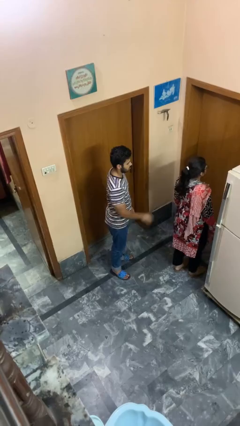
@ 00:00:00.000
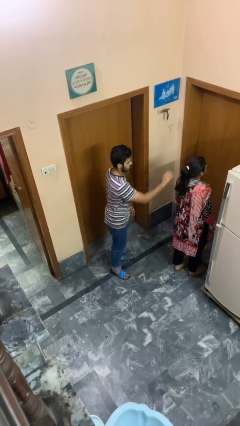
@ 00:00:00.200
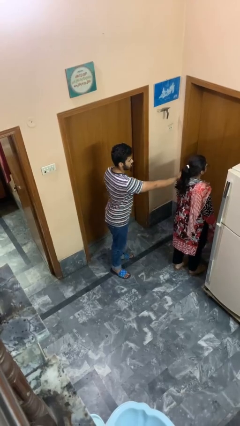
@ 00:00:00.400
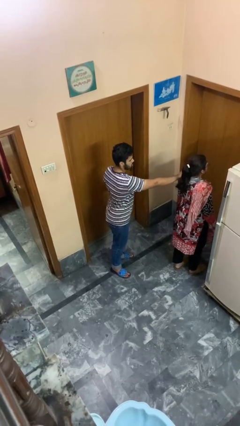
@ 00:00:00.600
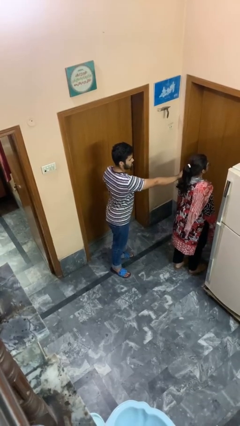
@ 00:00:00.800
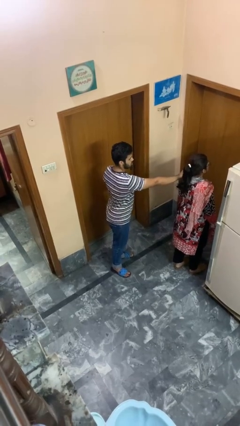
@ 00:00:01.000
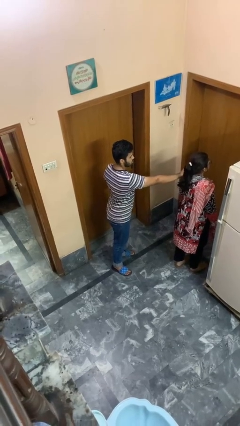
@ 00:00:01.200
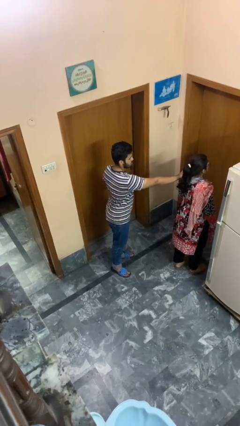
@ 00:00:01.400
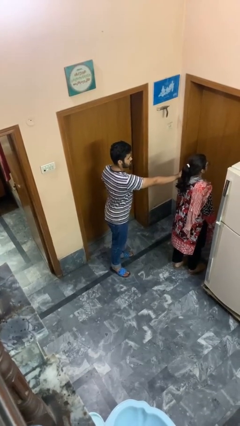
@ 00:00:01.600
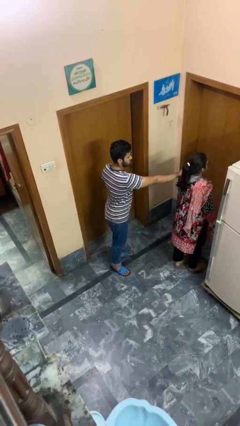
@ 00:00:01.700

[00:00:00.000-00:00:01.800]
person grabs person by shoulder

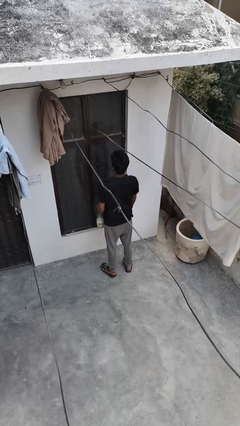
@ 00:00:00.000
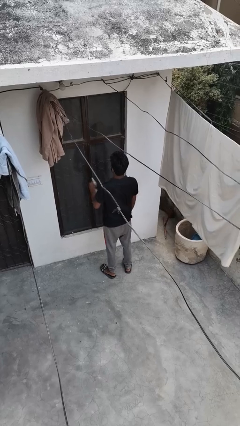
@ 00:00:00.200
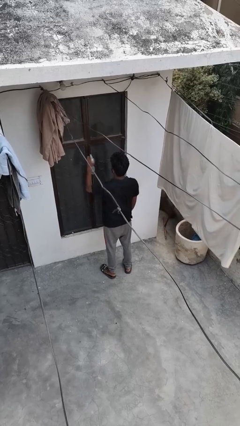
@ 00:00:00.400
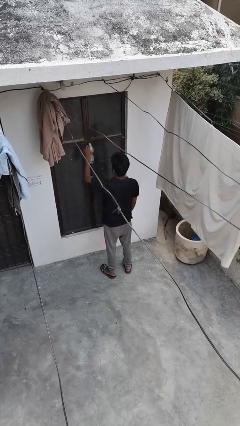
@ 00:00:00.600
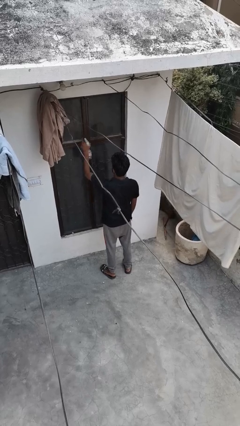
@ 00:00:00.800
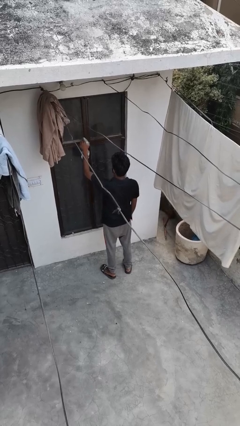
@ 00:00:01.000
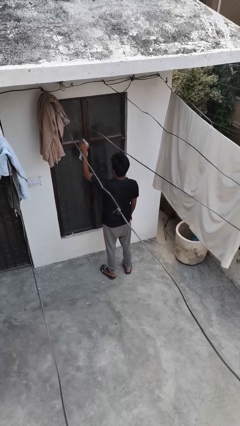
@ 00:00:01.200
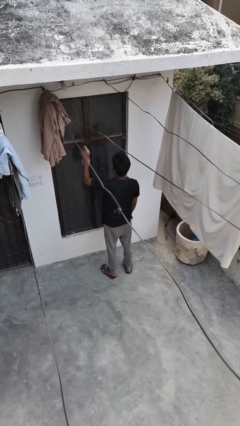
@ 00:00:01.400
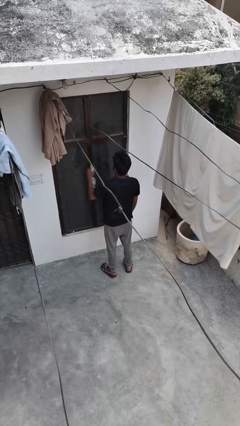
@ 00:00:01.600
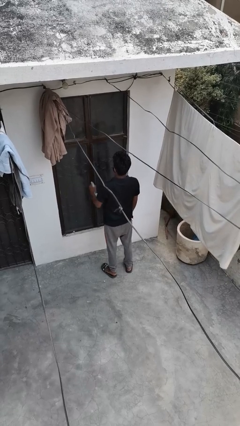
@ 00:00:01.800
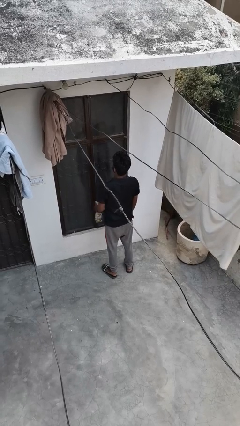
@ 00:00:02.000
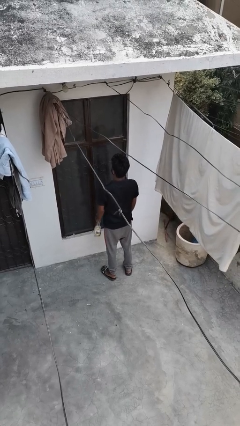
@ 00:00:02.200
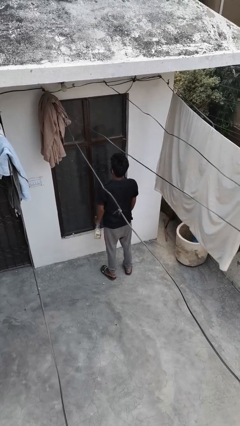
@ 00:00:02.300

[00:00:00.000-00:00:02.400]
person sprays from bottle

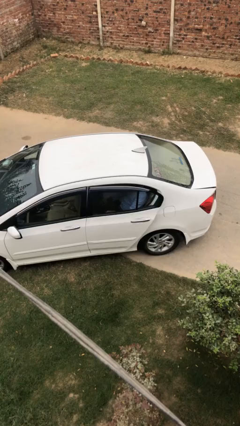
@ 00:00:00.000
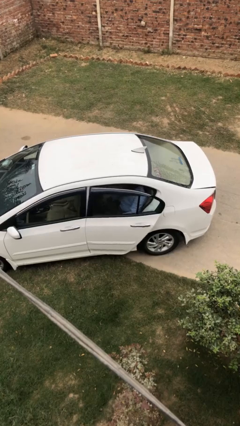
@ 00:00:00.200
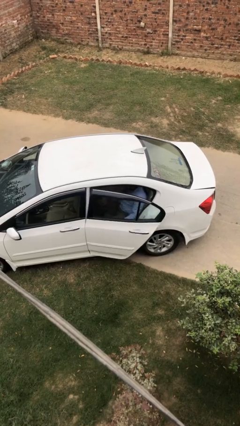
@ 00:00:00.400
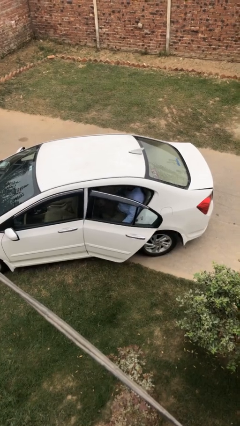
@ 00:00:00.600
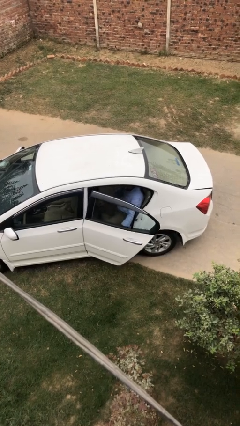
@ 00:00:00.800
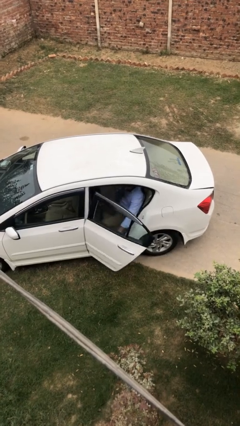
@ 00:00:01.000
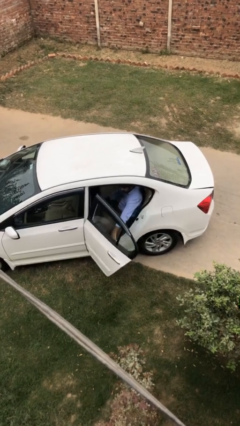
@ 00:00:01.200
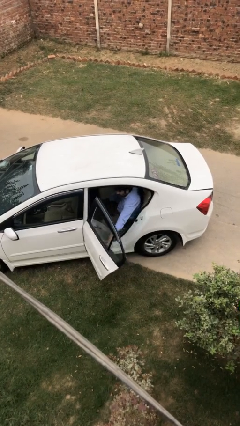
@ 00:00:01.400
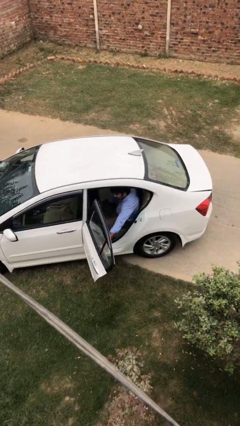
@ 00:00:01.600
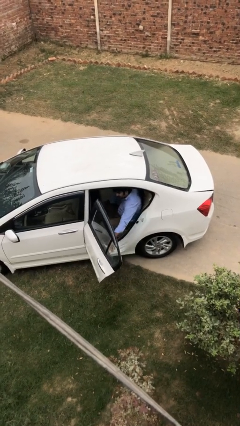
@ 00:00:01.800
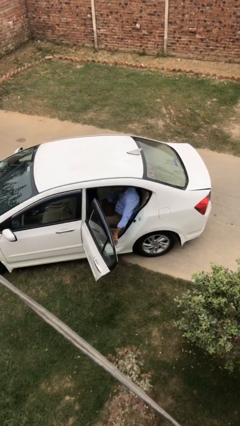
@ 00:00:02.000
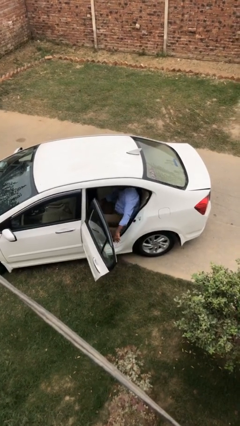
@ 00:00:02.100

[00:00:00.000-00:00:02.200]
person opens car door

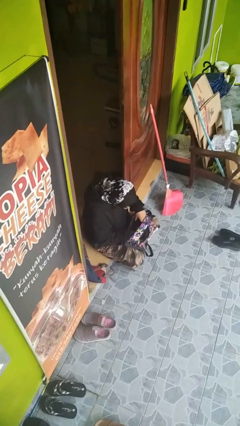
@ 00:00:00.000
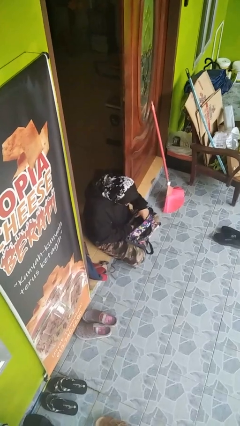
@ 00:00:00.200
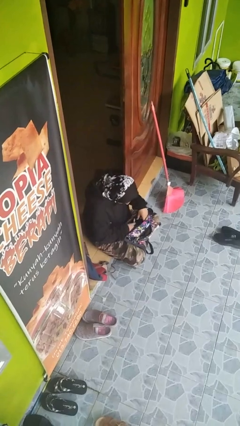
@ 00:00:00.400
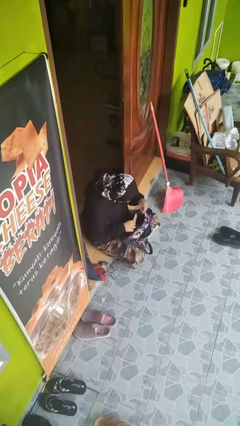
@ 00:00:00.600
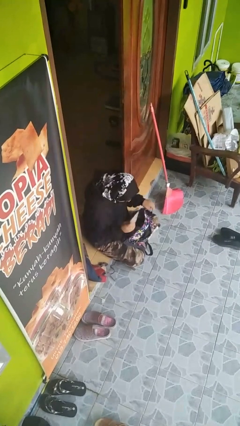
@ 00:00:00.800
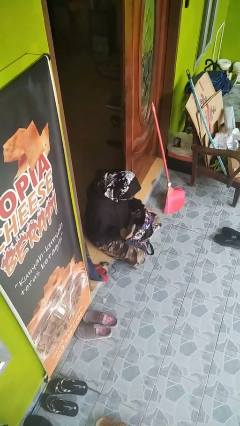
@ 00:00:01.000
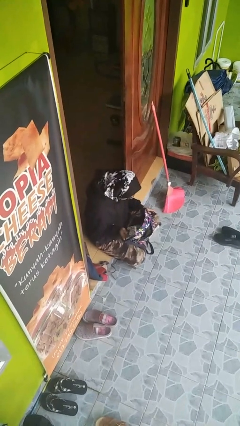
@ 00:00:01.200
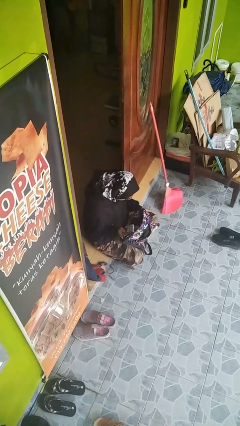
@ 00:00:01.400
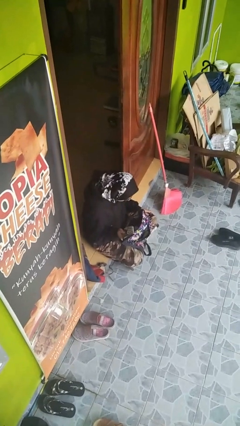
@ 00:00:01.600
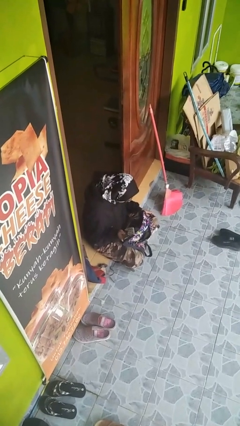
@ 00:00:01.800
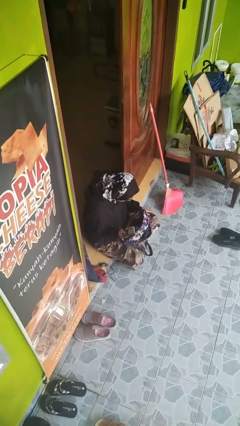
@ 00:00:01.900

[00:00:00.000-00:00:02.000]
person takes object from purse

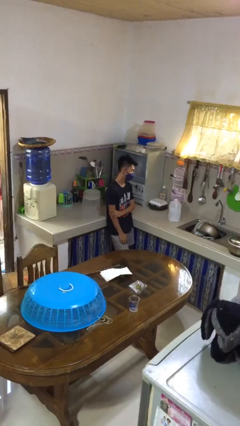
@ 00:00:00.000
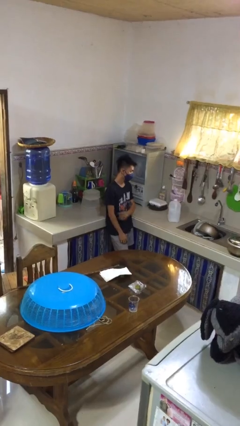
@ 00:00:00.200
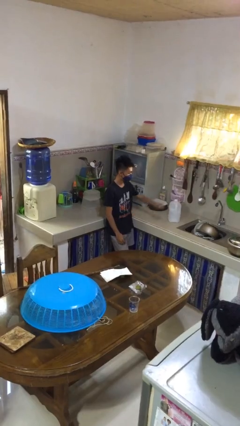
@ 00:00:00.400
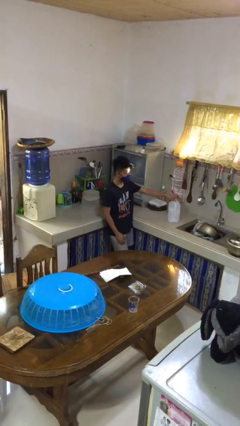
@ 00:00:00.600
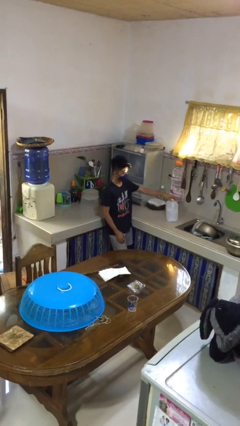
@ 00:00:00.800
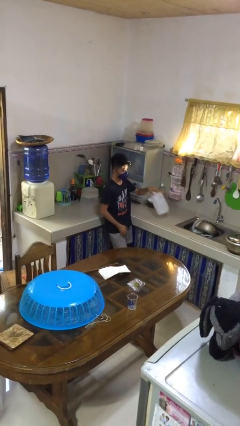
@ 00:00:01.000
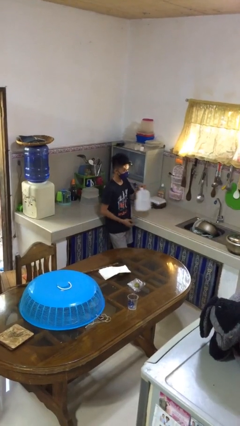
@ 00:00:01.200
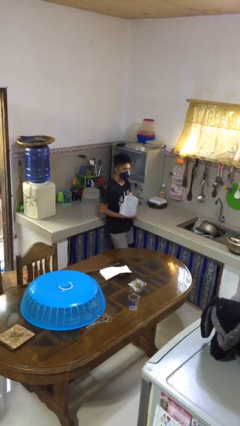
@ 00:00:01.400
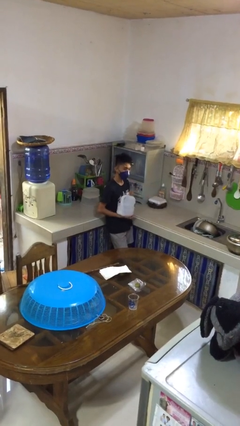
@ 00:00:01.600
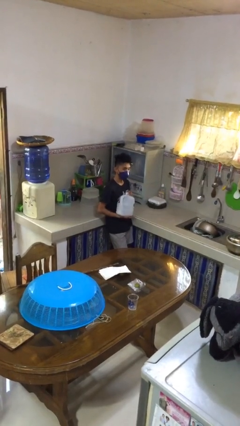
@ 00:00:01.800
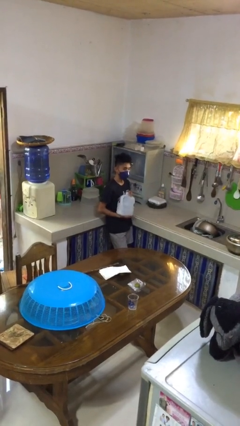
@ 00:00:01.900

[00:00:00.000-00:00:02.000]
person puts down object on countertop

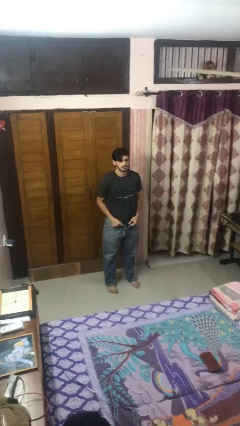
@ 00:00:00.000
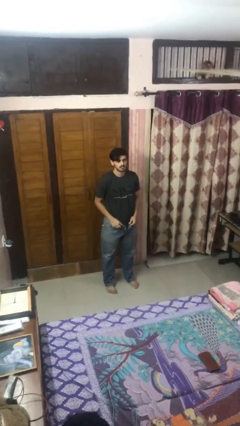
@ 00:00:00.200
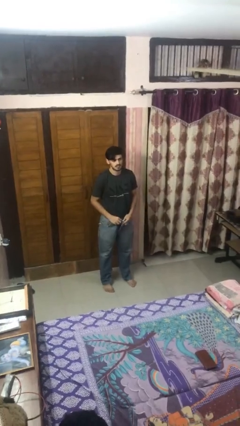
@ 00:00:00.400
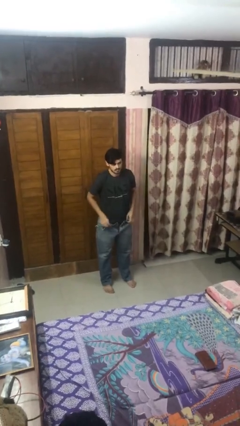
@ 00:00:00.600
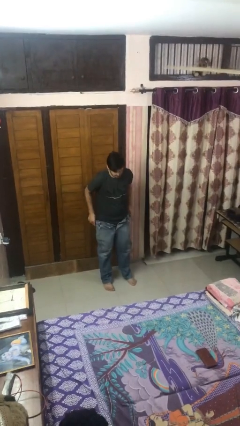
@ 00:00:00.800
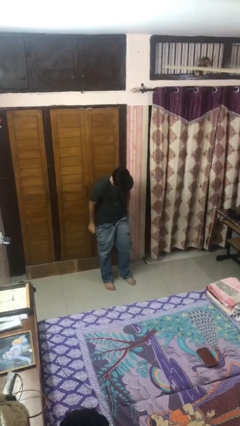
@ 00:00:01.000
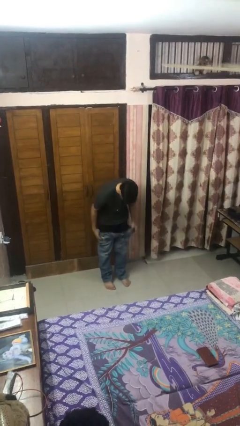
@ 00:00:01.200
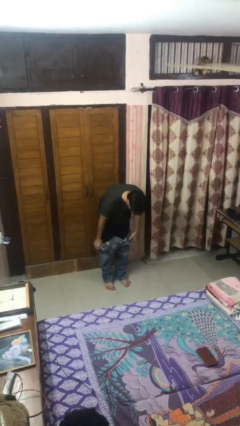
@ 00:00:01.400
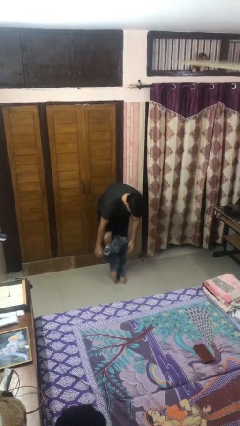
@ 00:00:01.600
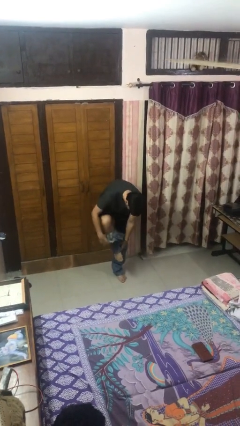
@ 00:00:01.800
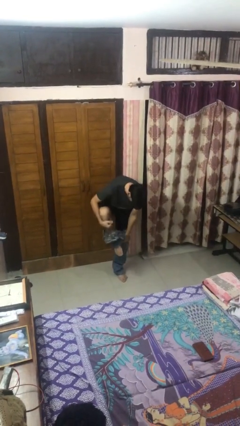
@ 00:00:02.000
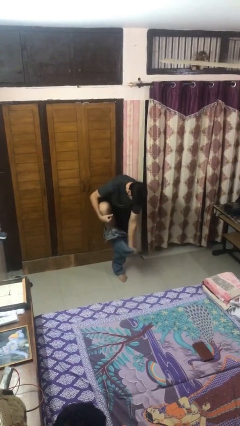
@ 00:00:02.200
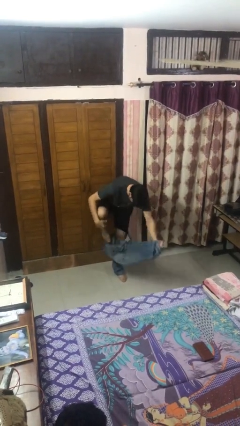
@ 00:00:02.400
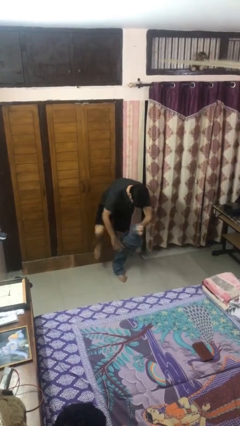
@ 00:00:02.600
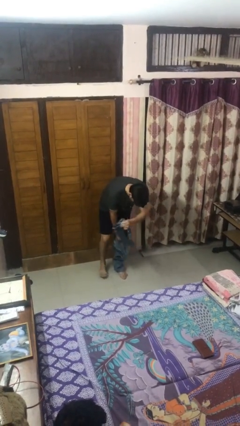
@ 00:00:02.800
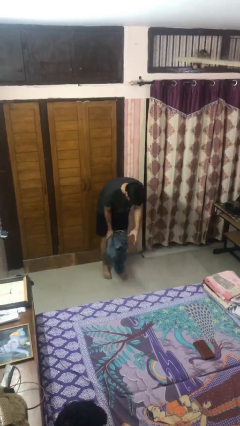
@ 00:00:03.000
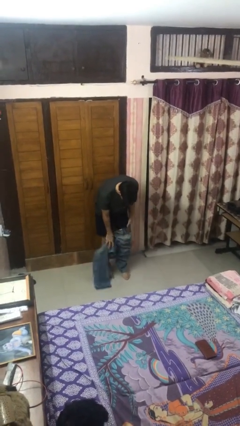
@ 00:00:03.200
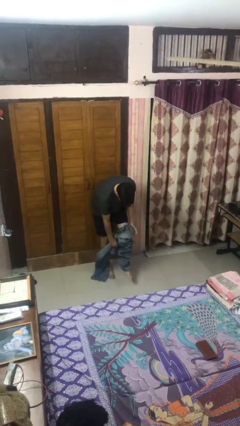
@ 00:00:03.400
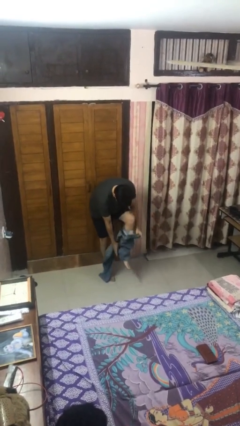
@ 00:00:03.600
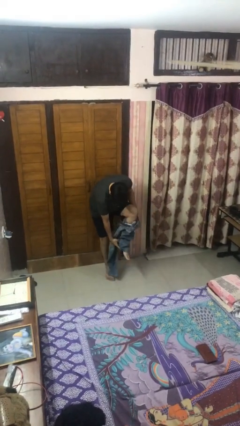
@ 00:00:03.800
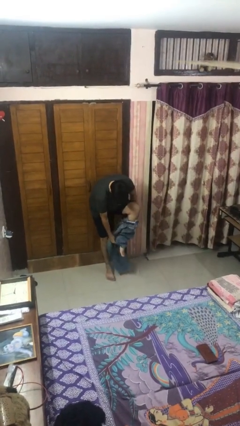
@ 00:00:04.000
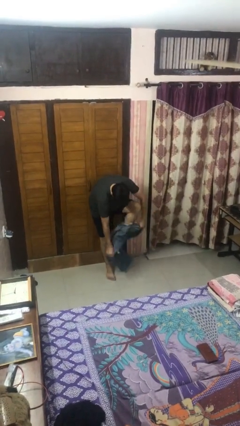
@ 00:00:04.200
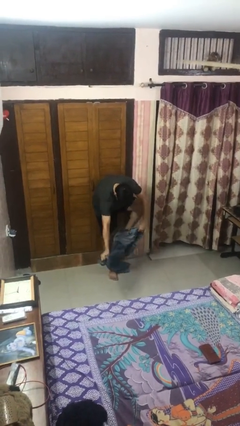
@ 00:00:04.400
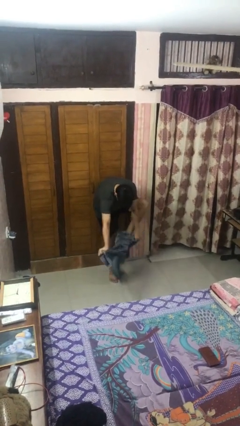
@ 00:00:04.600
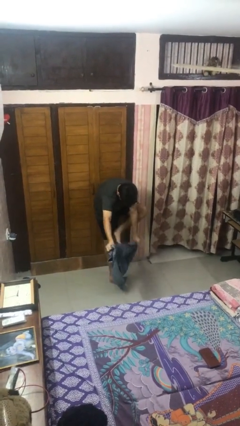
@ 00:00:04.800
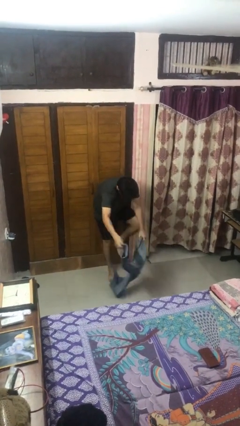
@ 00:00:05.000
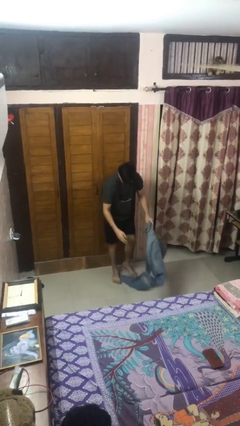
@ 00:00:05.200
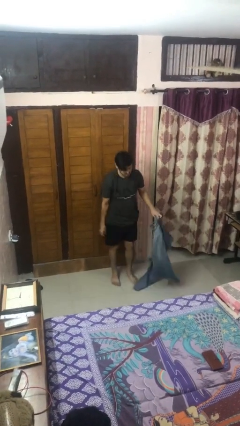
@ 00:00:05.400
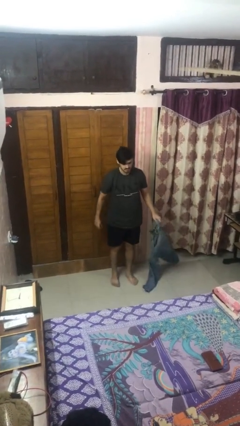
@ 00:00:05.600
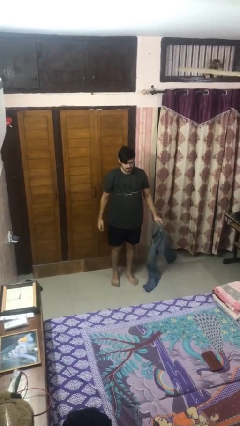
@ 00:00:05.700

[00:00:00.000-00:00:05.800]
person takes off pants

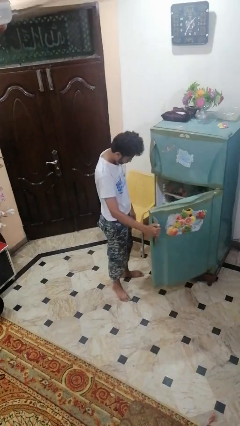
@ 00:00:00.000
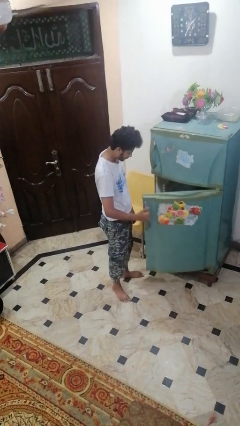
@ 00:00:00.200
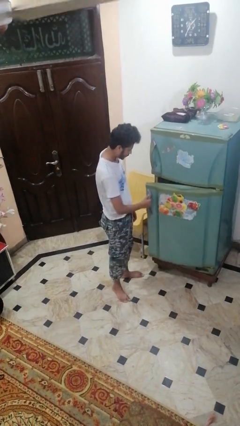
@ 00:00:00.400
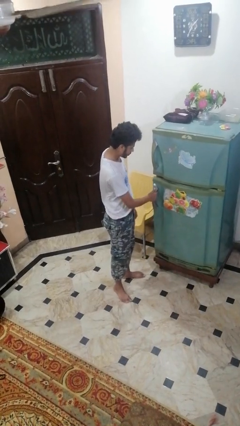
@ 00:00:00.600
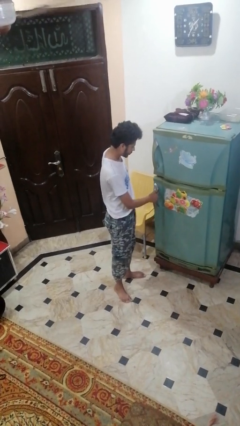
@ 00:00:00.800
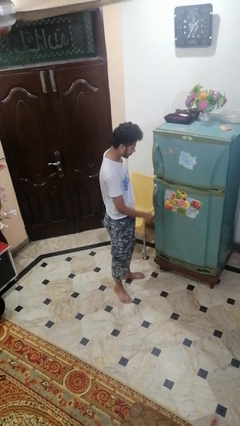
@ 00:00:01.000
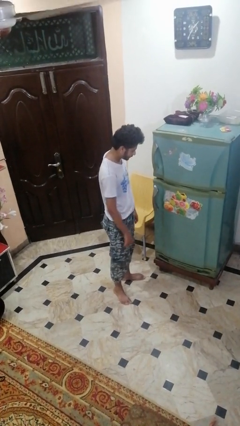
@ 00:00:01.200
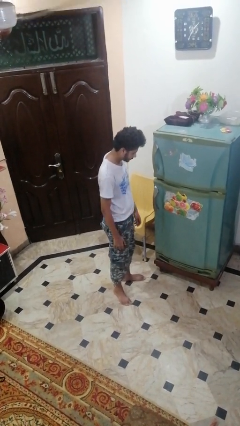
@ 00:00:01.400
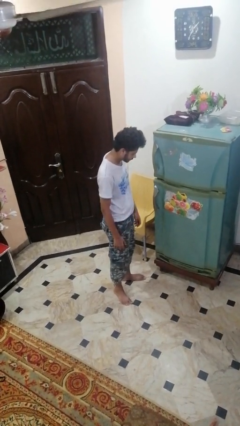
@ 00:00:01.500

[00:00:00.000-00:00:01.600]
person closes refrigerator
